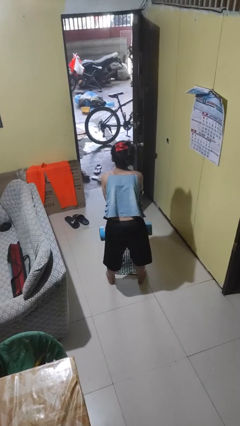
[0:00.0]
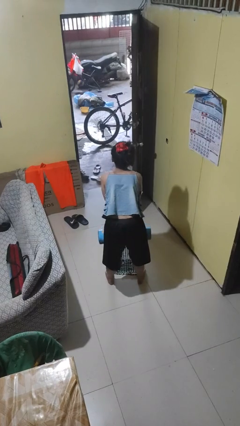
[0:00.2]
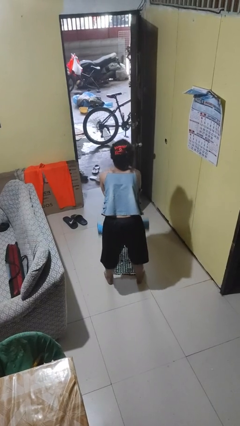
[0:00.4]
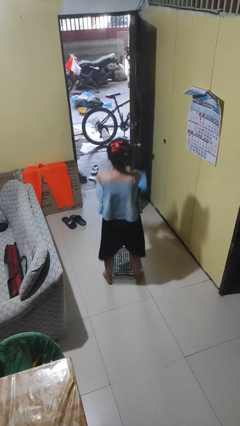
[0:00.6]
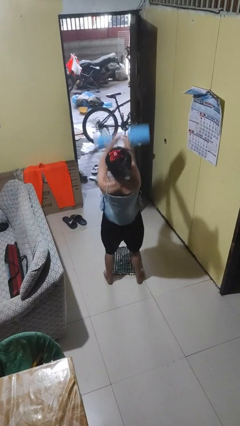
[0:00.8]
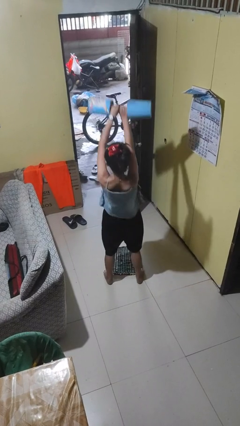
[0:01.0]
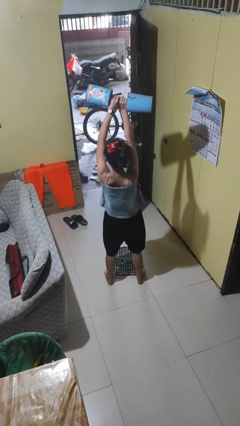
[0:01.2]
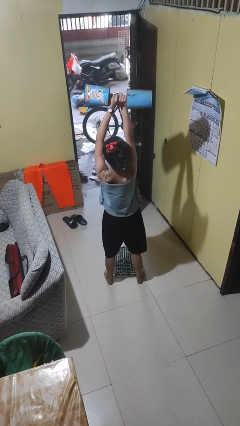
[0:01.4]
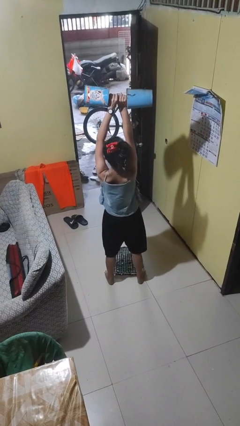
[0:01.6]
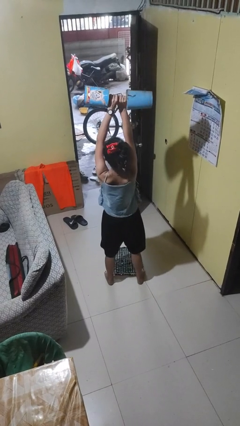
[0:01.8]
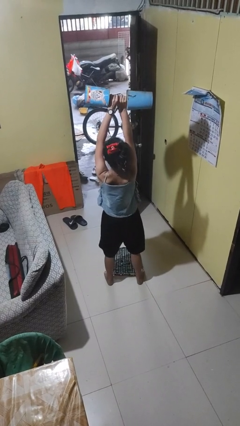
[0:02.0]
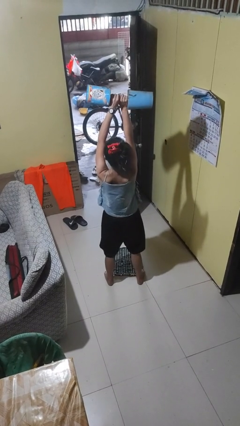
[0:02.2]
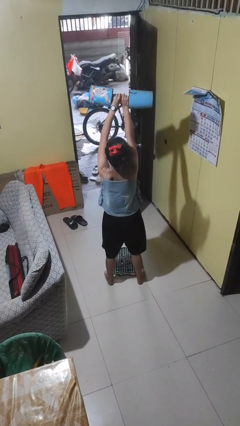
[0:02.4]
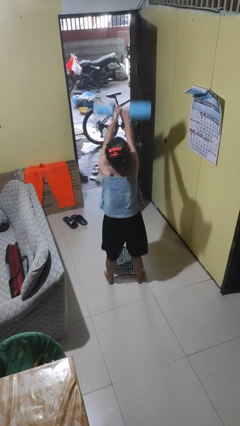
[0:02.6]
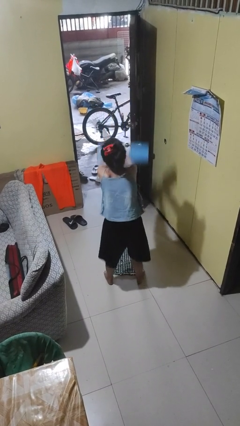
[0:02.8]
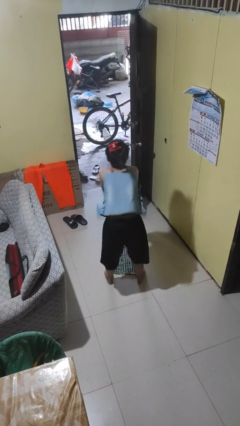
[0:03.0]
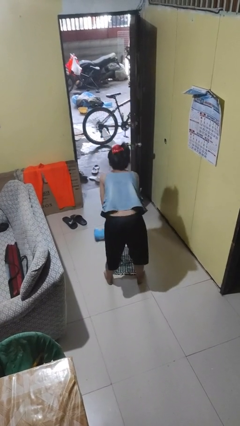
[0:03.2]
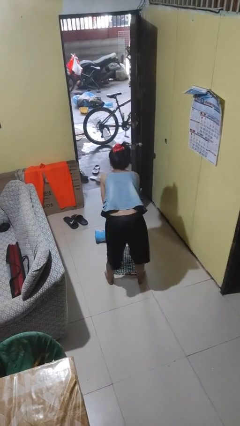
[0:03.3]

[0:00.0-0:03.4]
person lifts dumbbells

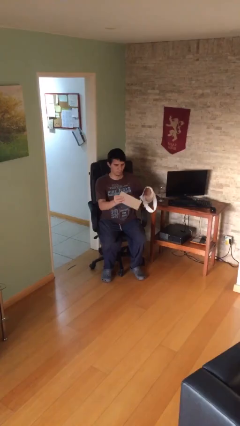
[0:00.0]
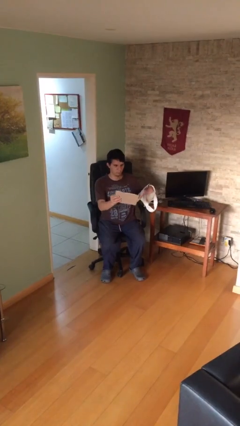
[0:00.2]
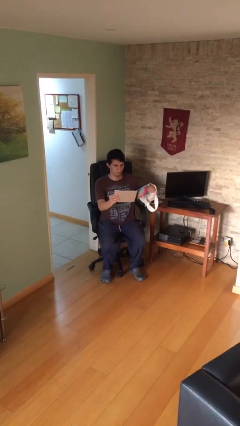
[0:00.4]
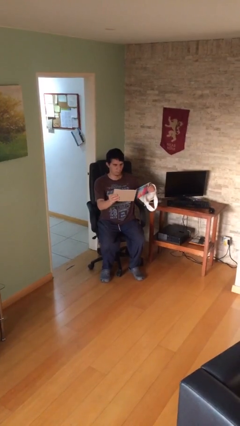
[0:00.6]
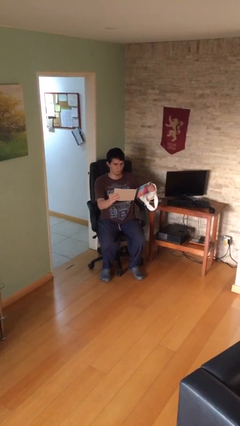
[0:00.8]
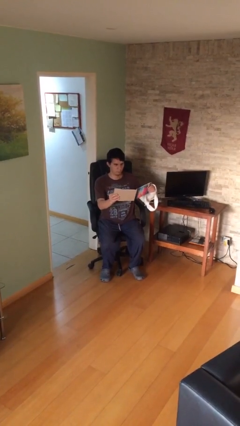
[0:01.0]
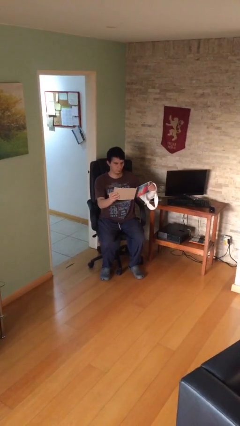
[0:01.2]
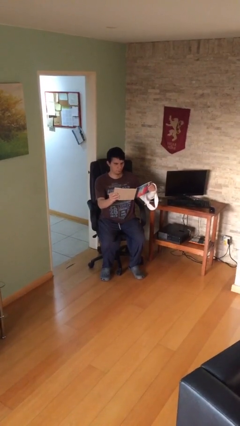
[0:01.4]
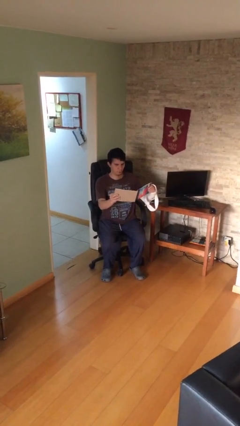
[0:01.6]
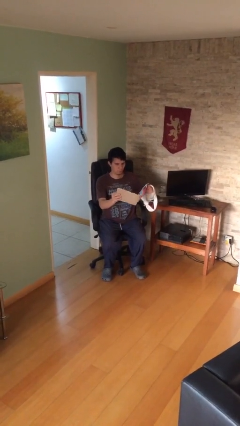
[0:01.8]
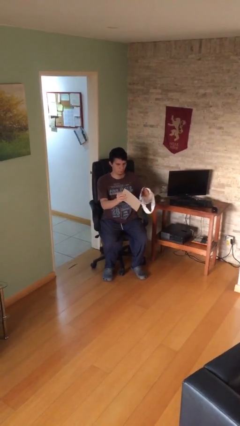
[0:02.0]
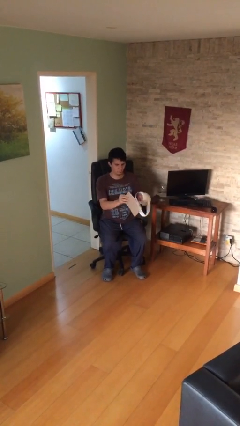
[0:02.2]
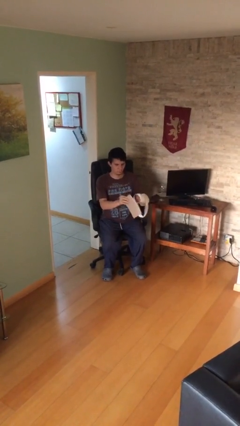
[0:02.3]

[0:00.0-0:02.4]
person reads document

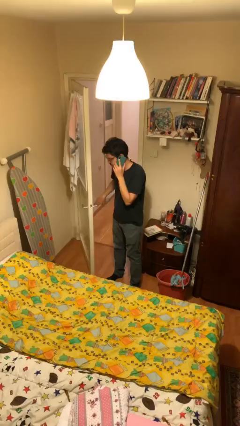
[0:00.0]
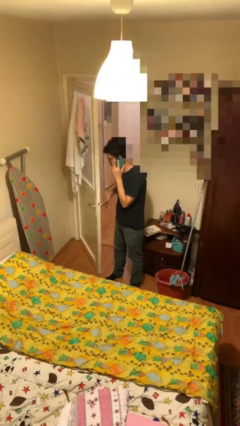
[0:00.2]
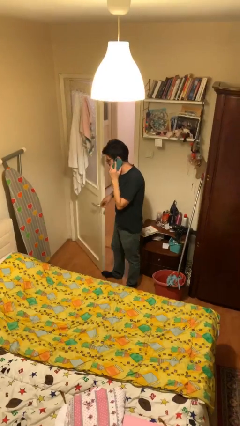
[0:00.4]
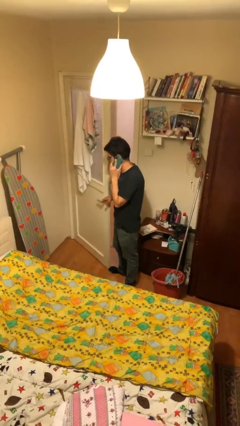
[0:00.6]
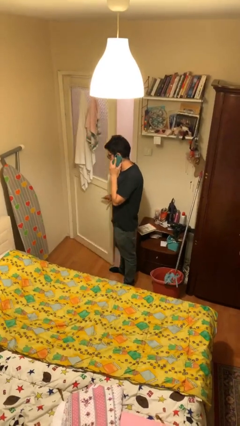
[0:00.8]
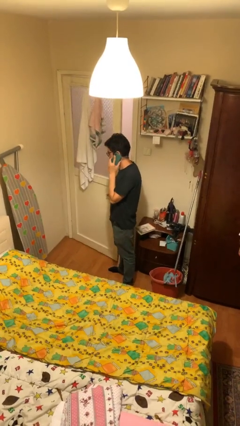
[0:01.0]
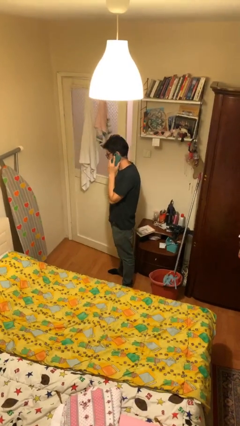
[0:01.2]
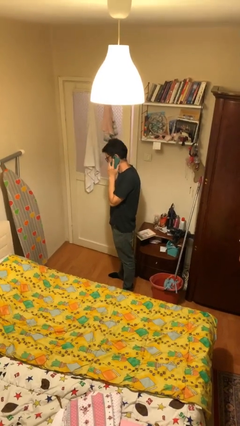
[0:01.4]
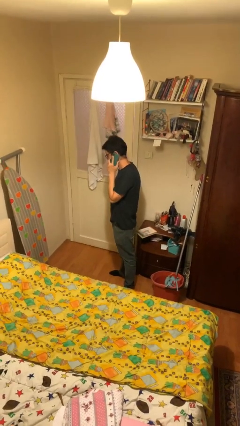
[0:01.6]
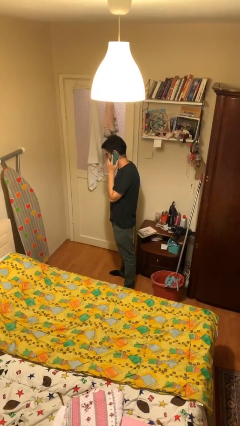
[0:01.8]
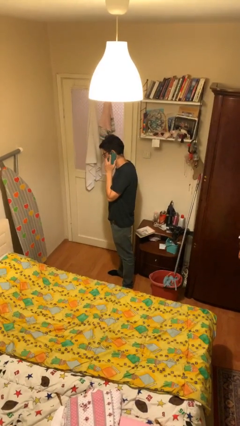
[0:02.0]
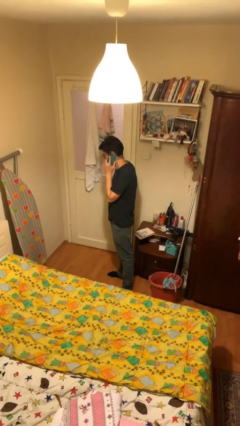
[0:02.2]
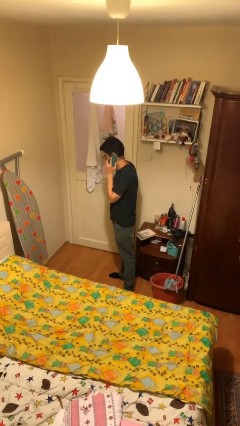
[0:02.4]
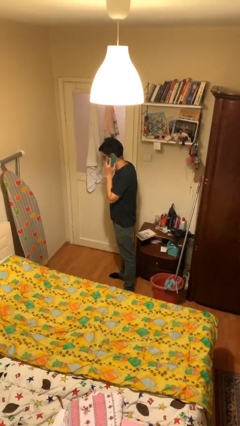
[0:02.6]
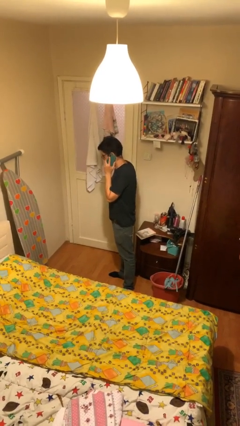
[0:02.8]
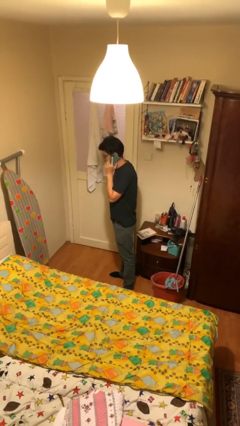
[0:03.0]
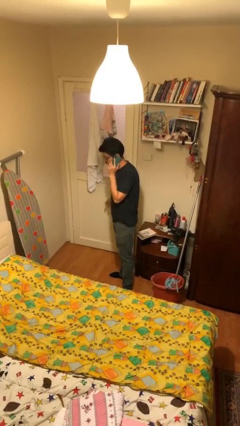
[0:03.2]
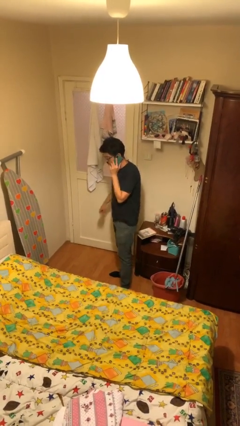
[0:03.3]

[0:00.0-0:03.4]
person closes facility door

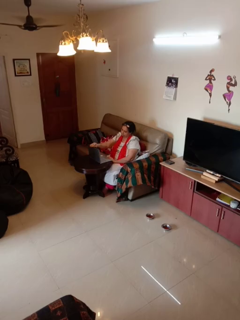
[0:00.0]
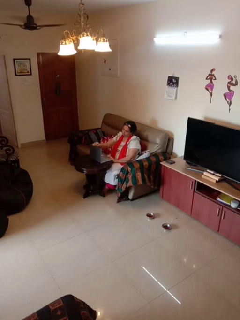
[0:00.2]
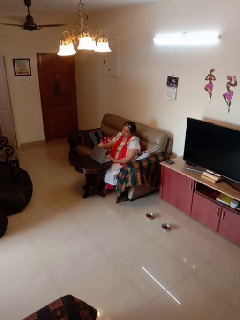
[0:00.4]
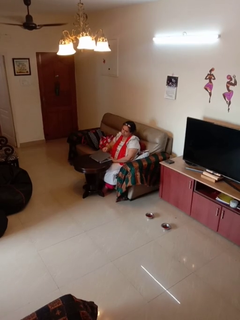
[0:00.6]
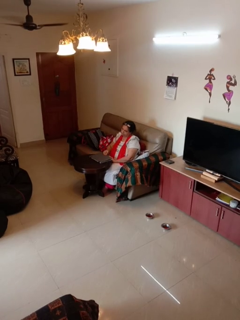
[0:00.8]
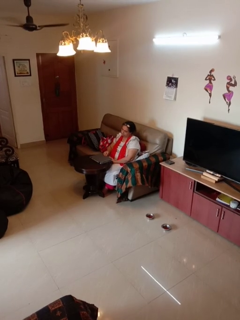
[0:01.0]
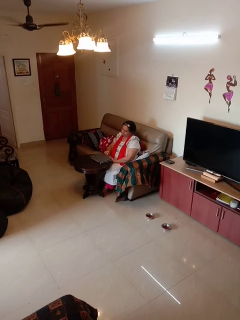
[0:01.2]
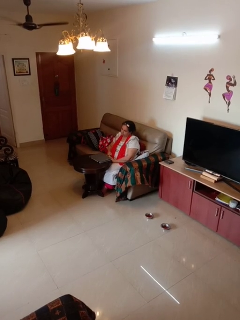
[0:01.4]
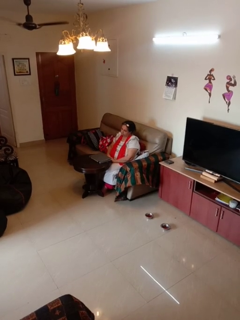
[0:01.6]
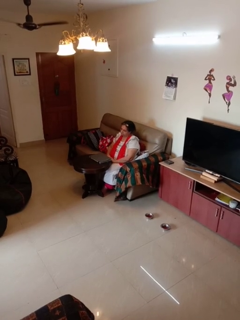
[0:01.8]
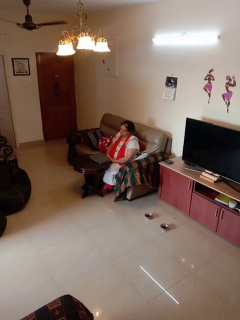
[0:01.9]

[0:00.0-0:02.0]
person closes laptop

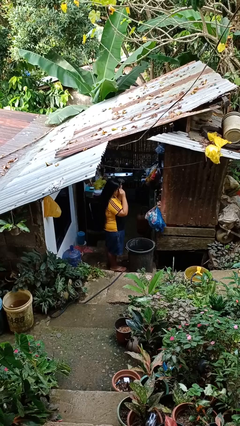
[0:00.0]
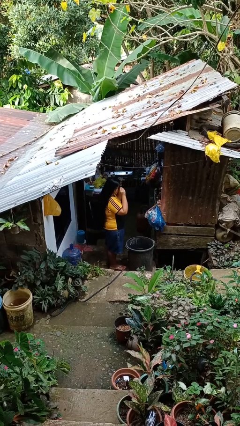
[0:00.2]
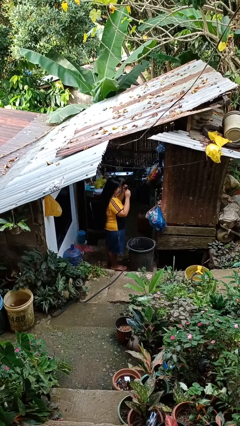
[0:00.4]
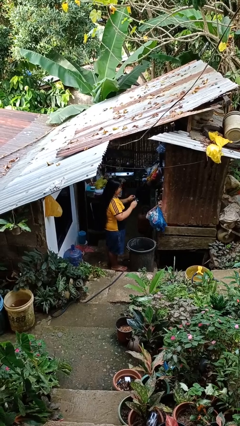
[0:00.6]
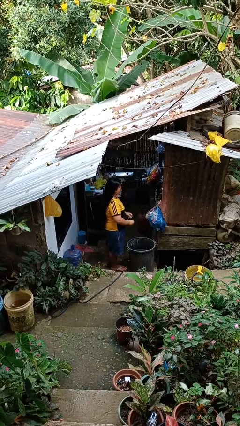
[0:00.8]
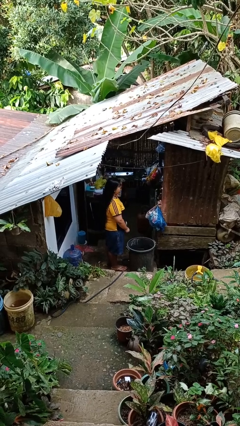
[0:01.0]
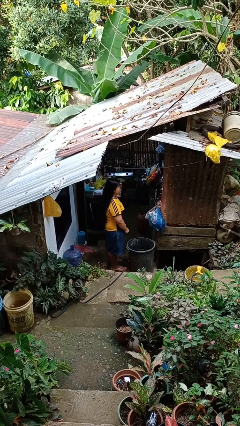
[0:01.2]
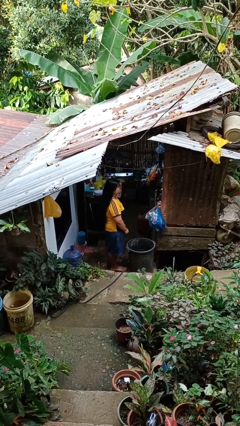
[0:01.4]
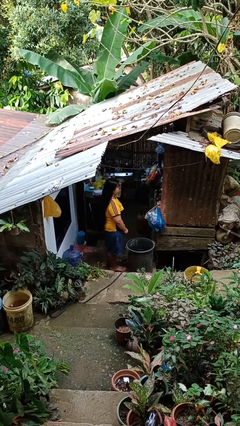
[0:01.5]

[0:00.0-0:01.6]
person takes off sunglasses

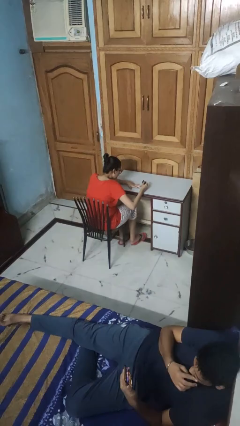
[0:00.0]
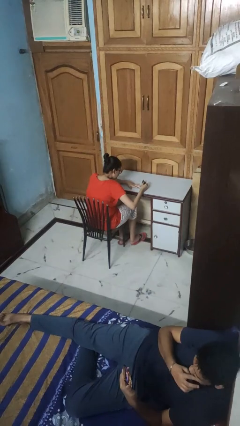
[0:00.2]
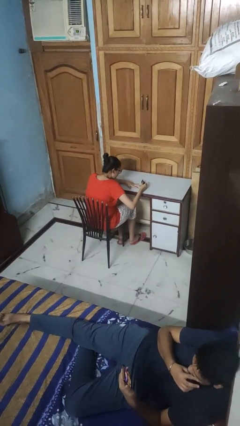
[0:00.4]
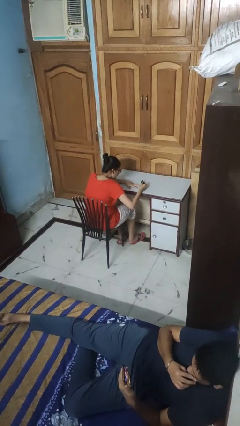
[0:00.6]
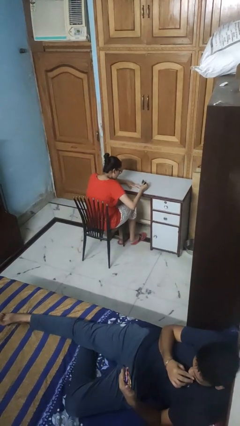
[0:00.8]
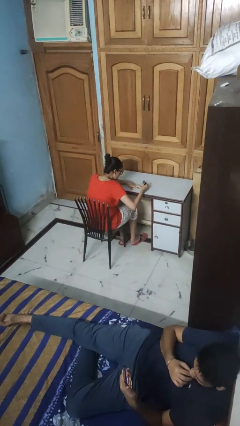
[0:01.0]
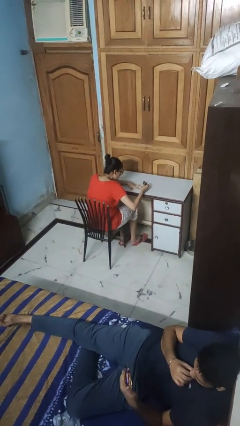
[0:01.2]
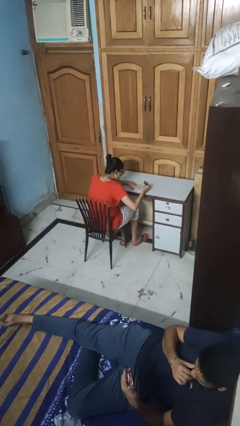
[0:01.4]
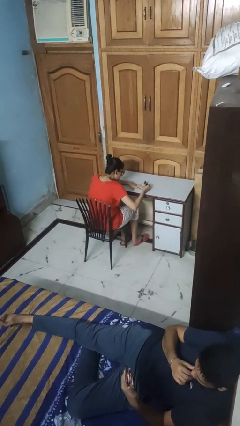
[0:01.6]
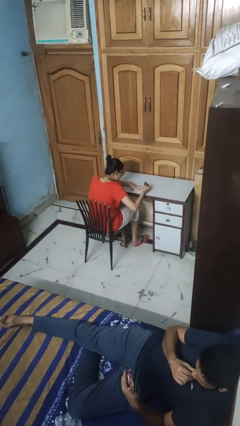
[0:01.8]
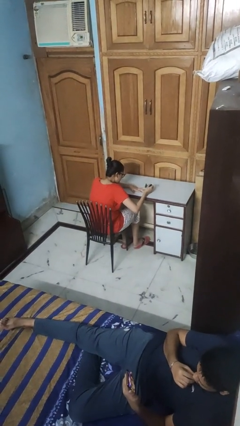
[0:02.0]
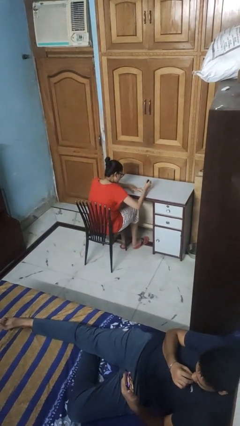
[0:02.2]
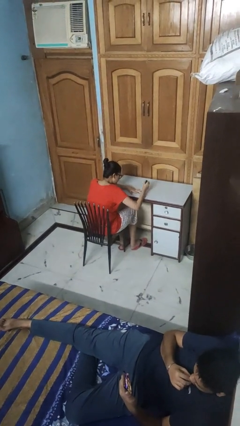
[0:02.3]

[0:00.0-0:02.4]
person paints fingernails

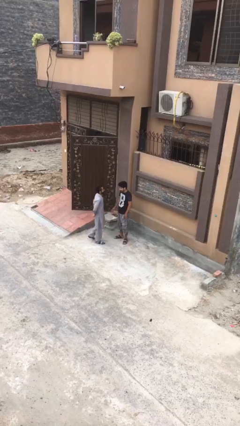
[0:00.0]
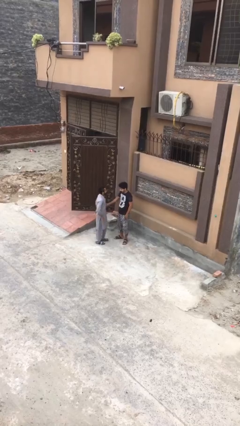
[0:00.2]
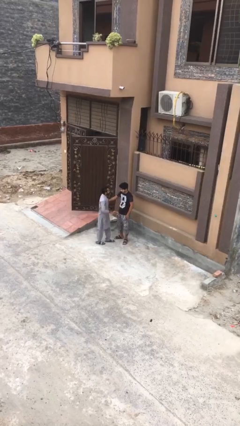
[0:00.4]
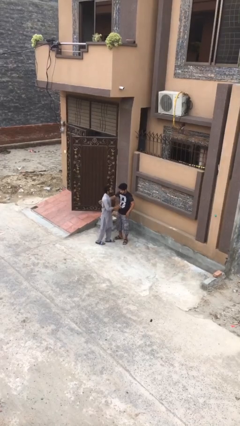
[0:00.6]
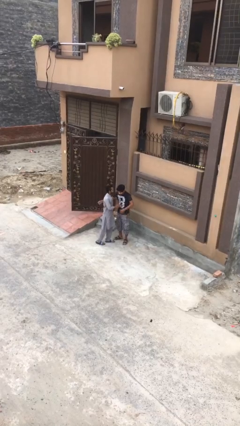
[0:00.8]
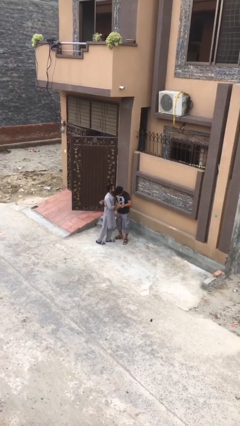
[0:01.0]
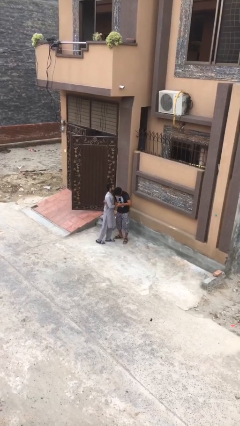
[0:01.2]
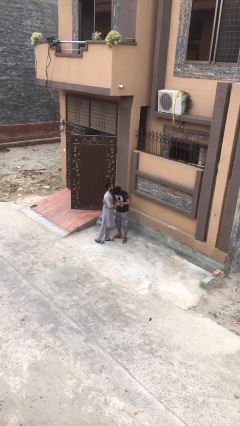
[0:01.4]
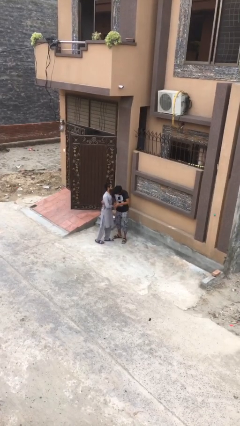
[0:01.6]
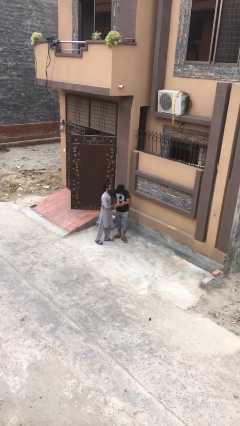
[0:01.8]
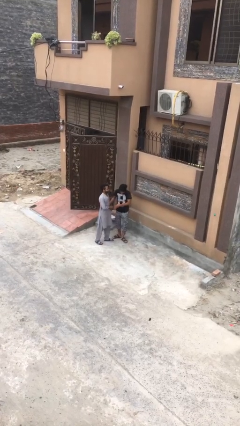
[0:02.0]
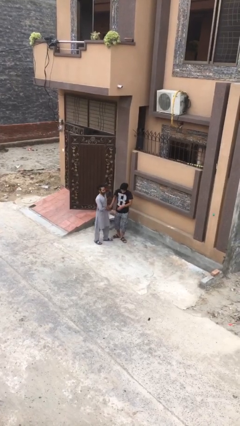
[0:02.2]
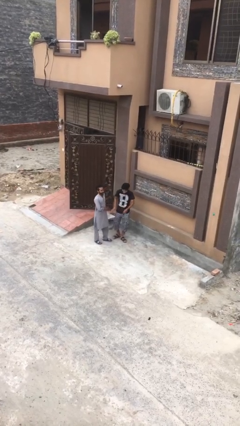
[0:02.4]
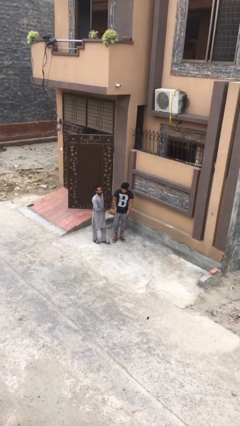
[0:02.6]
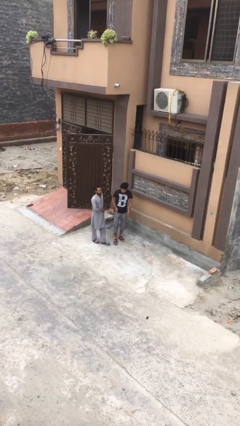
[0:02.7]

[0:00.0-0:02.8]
person embraces person
